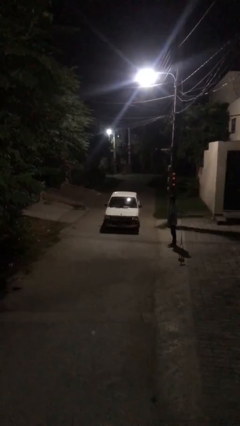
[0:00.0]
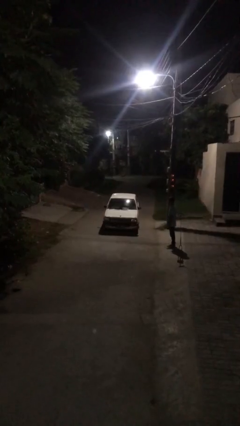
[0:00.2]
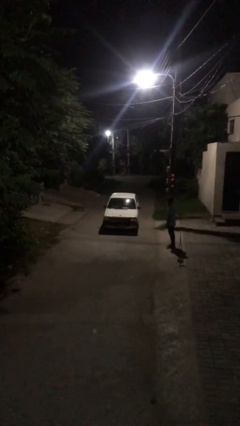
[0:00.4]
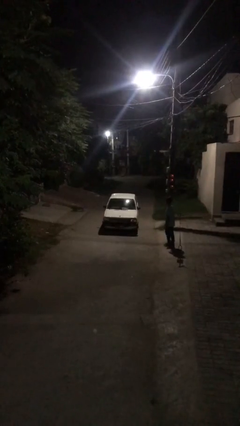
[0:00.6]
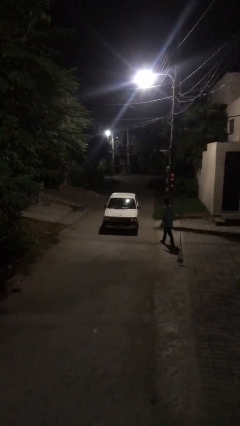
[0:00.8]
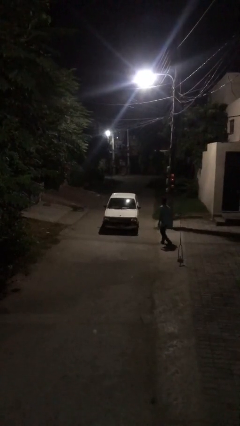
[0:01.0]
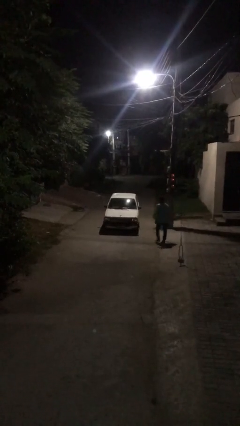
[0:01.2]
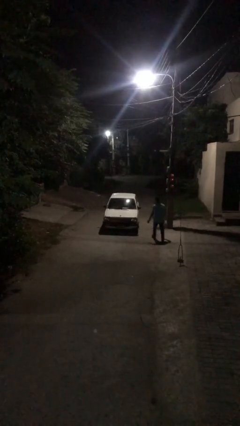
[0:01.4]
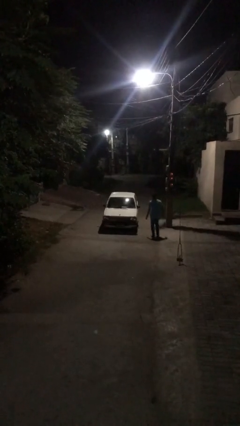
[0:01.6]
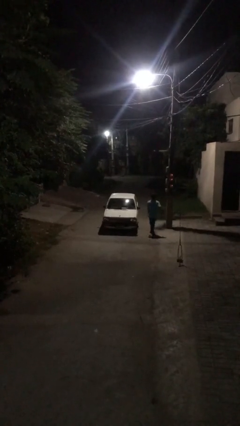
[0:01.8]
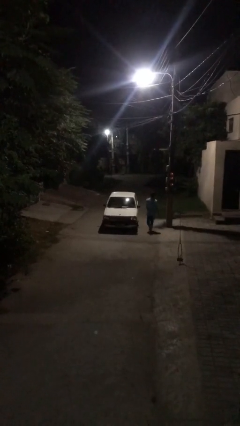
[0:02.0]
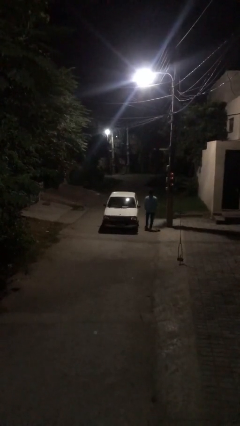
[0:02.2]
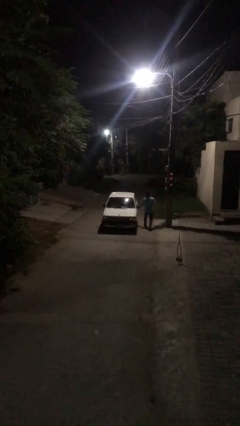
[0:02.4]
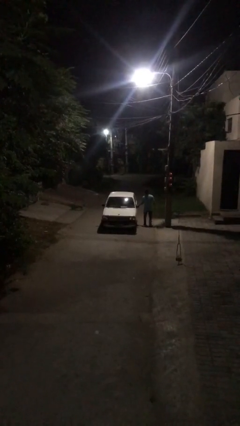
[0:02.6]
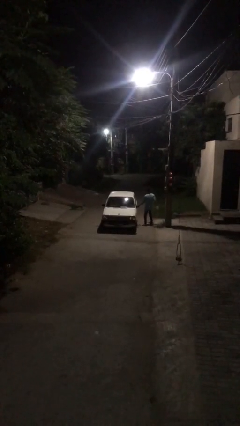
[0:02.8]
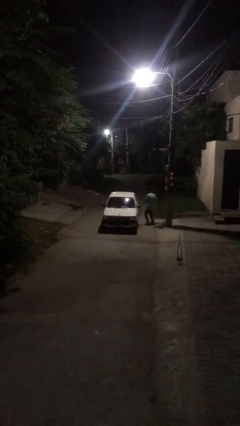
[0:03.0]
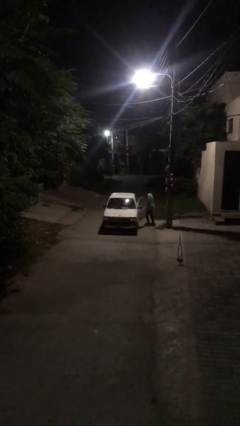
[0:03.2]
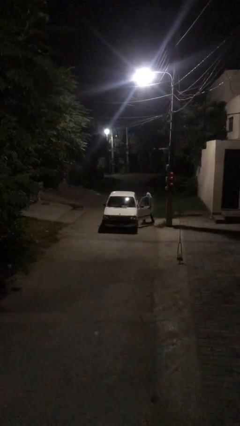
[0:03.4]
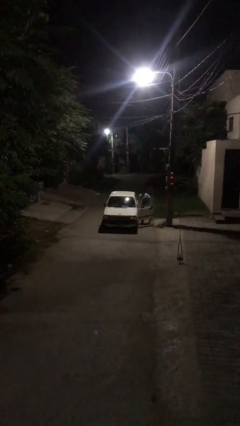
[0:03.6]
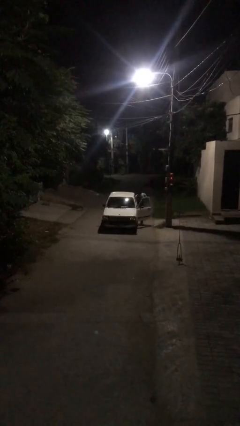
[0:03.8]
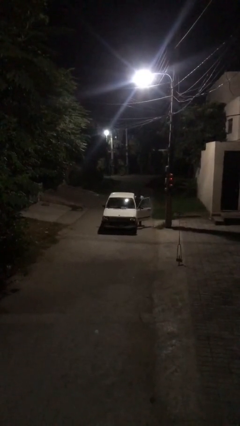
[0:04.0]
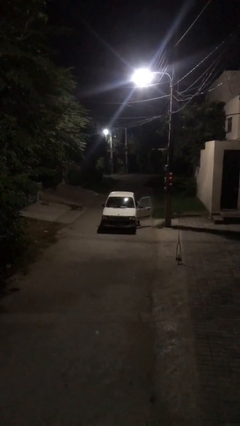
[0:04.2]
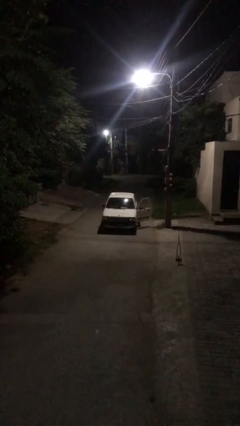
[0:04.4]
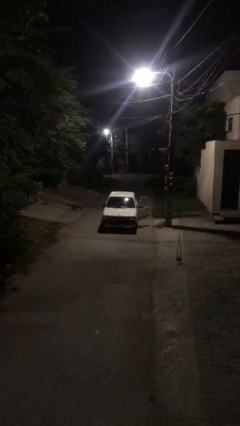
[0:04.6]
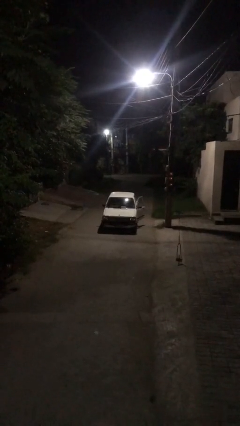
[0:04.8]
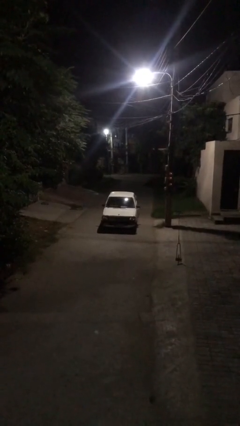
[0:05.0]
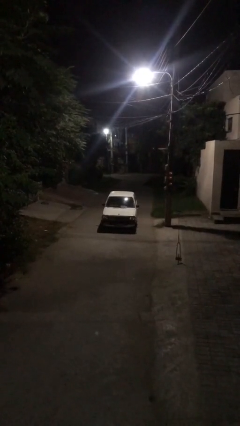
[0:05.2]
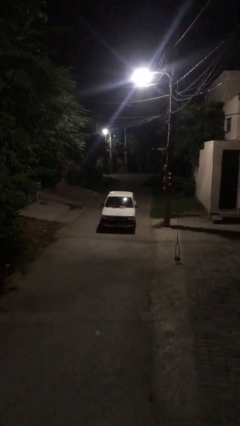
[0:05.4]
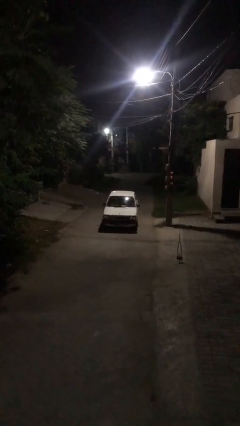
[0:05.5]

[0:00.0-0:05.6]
car picks up person

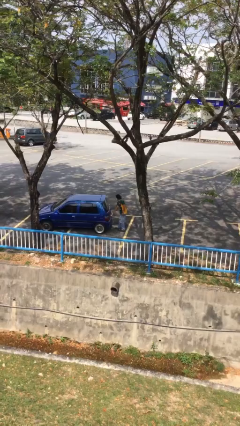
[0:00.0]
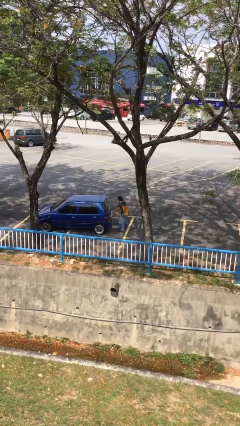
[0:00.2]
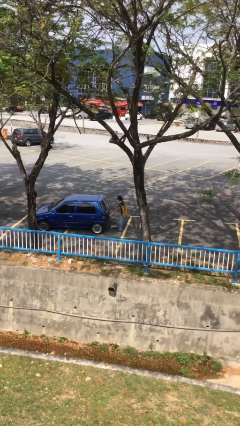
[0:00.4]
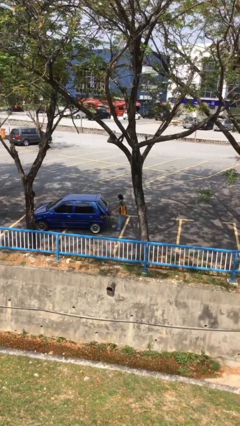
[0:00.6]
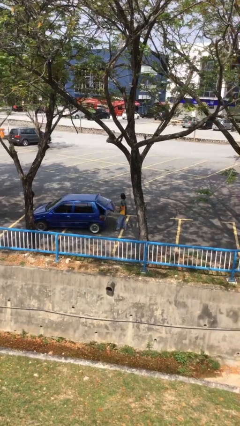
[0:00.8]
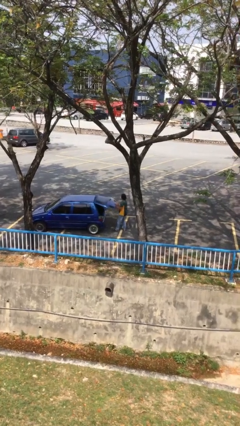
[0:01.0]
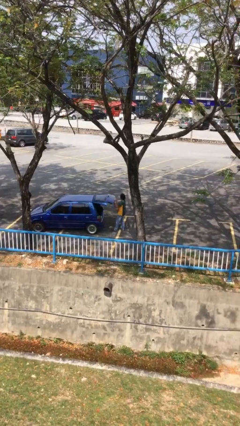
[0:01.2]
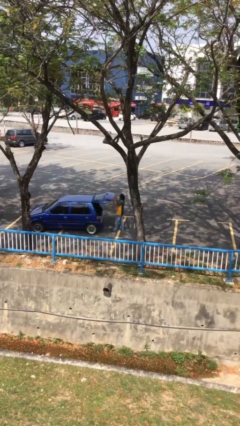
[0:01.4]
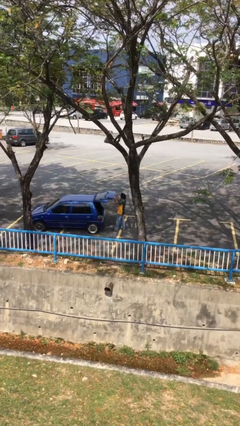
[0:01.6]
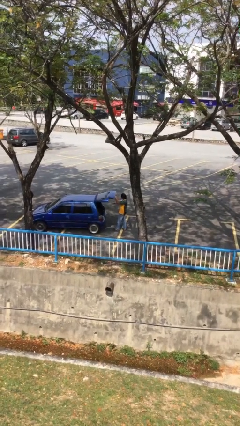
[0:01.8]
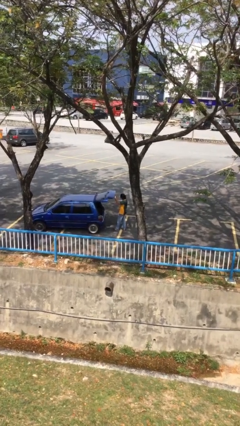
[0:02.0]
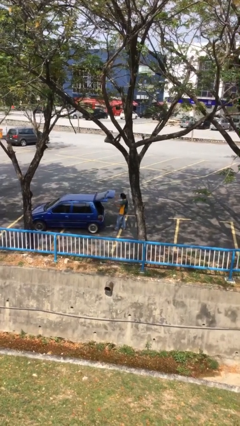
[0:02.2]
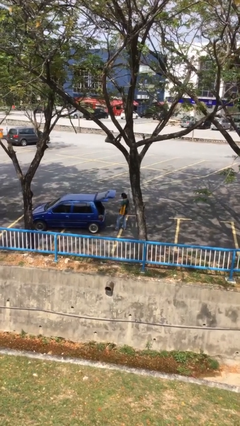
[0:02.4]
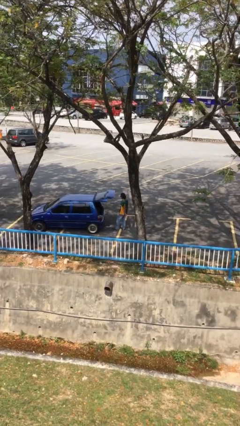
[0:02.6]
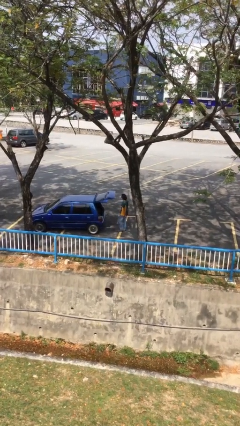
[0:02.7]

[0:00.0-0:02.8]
person opens car trunk

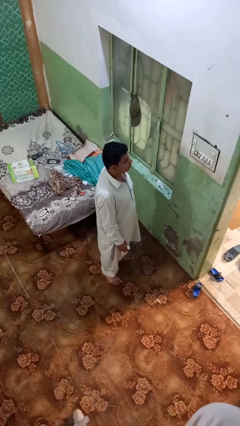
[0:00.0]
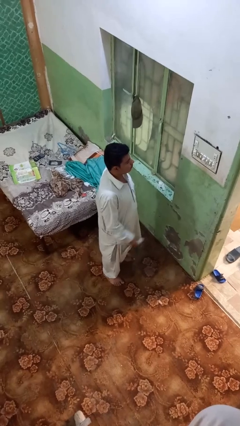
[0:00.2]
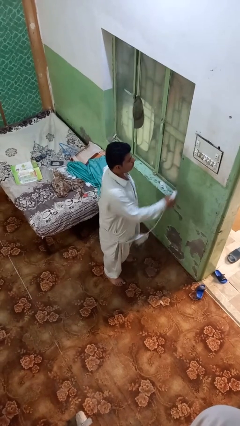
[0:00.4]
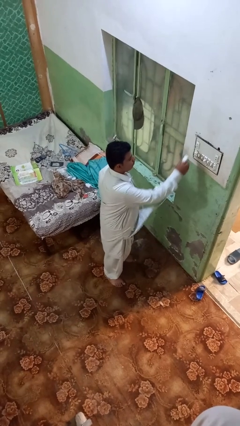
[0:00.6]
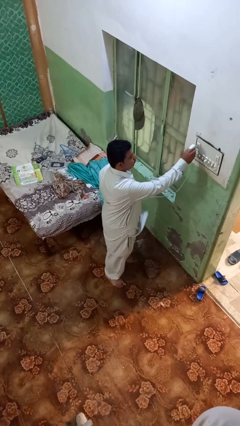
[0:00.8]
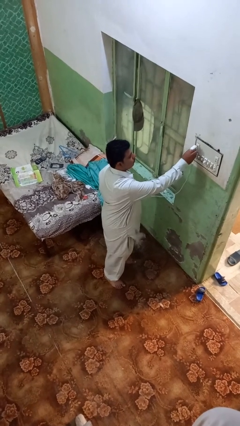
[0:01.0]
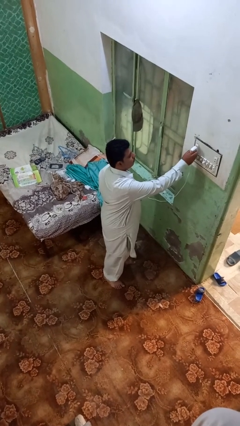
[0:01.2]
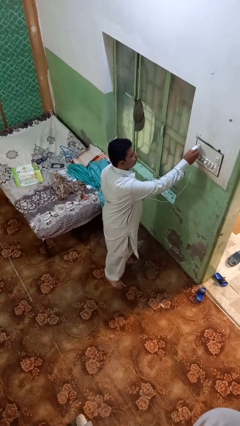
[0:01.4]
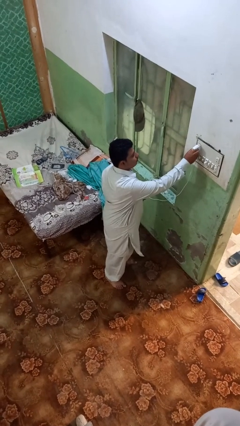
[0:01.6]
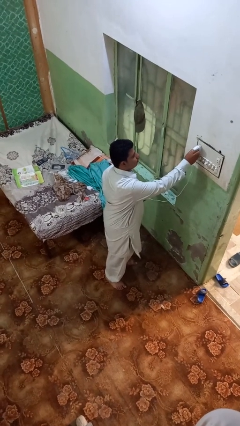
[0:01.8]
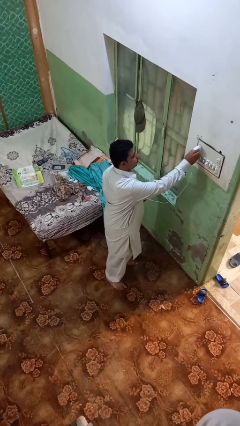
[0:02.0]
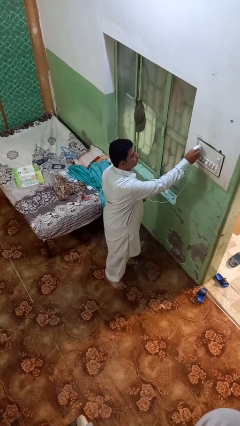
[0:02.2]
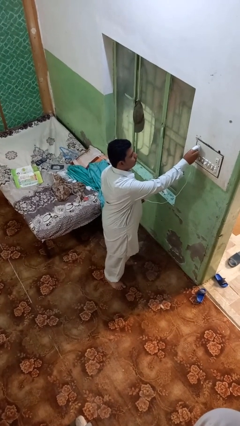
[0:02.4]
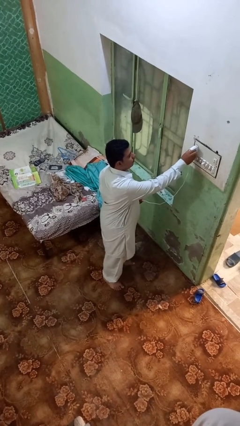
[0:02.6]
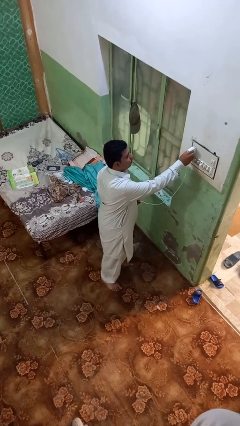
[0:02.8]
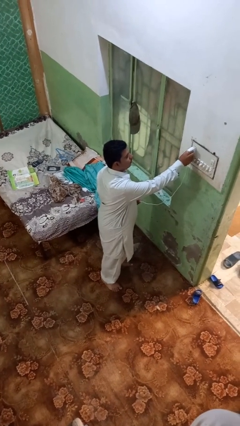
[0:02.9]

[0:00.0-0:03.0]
person plugs into electrical socket

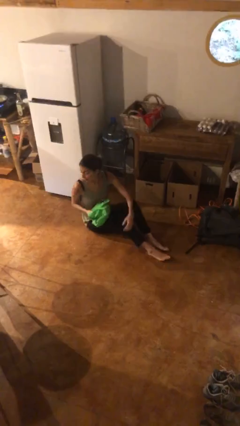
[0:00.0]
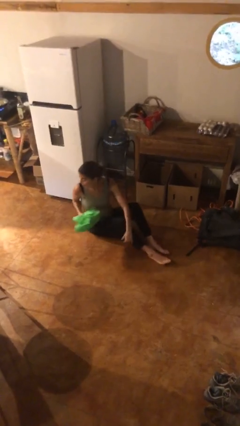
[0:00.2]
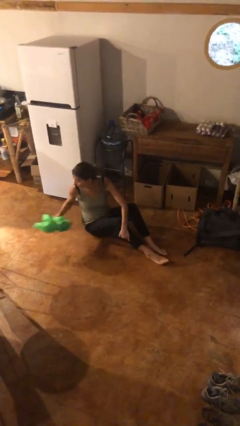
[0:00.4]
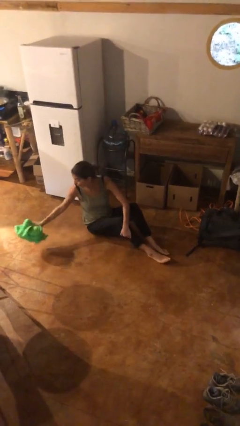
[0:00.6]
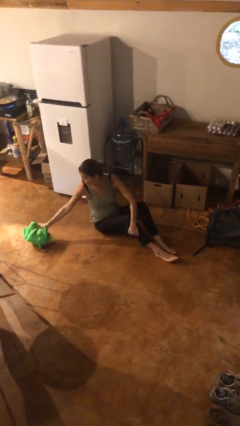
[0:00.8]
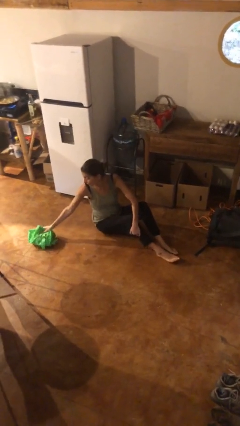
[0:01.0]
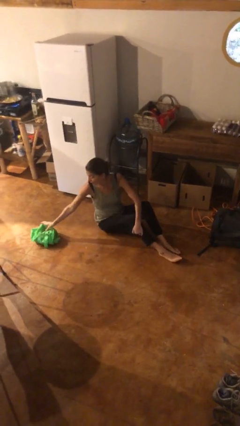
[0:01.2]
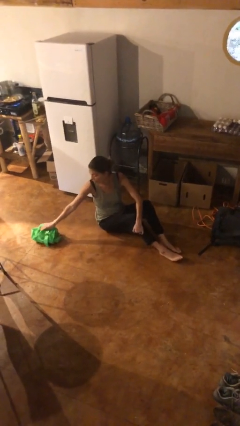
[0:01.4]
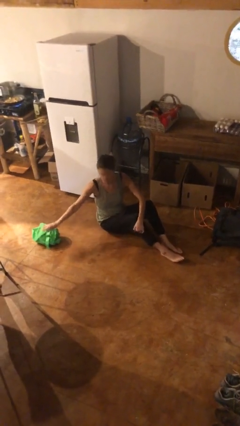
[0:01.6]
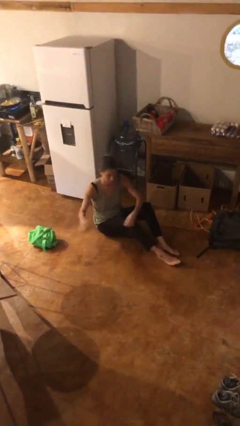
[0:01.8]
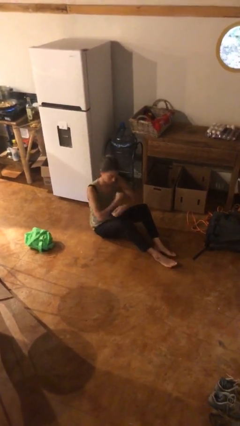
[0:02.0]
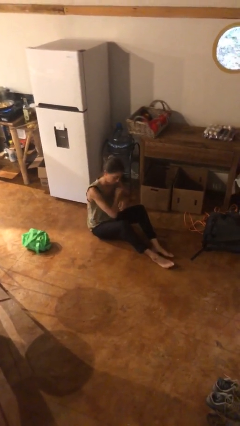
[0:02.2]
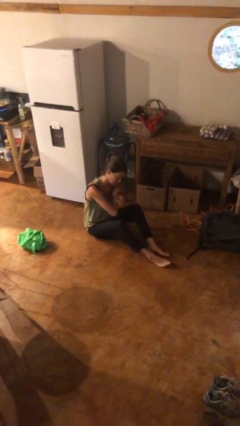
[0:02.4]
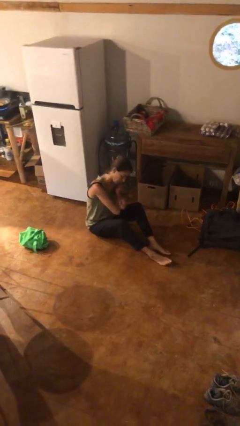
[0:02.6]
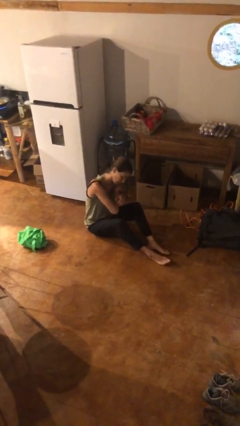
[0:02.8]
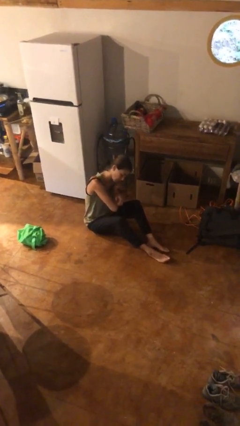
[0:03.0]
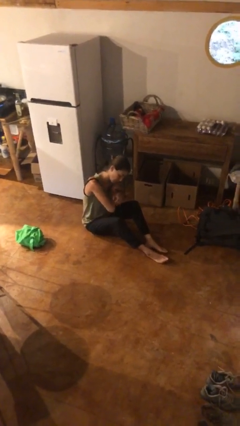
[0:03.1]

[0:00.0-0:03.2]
person puts down object on floor

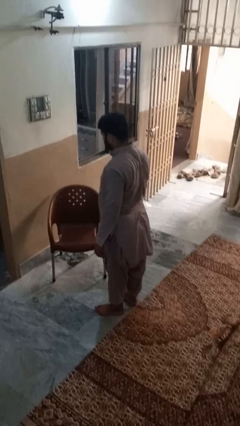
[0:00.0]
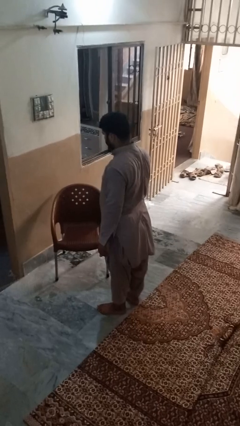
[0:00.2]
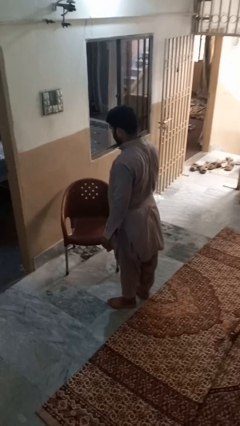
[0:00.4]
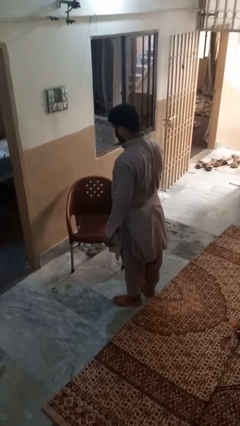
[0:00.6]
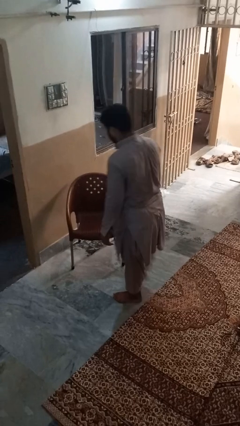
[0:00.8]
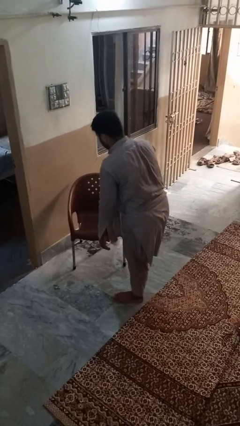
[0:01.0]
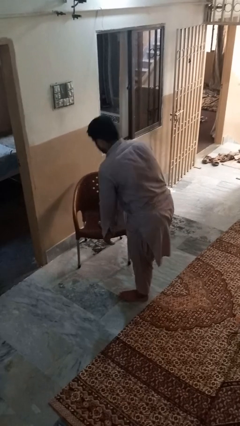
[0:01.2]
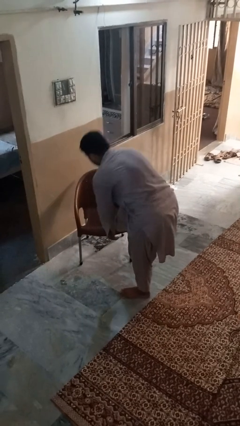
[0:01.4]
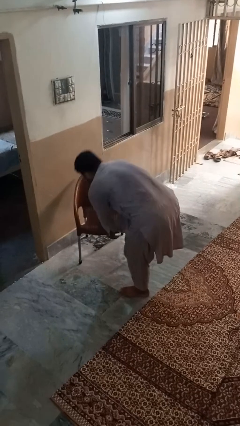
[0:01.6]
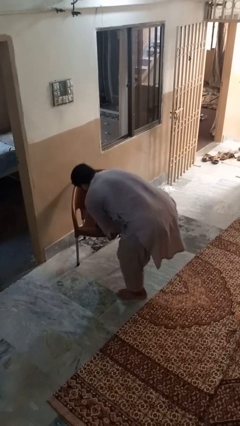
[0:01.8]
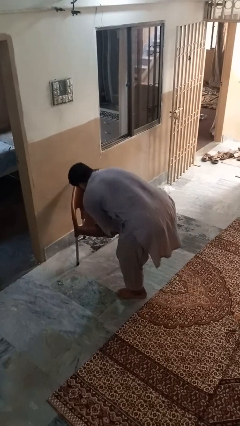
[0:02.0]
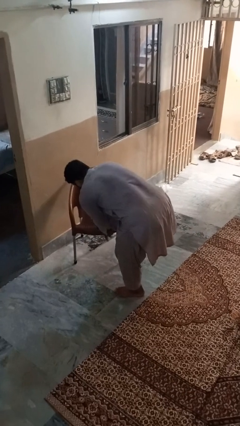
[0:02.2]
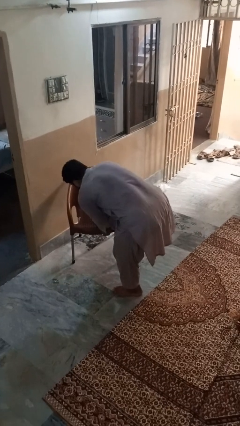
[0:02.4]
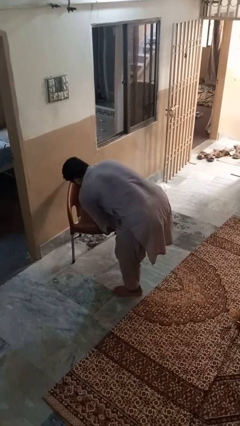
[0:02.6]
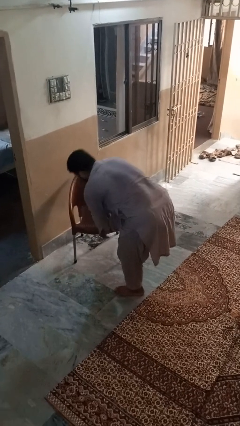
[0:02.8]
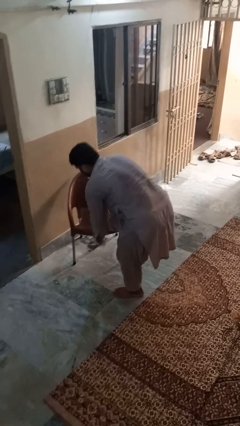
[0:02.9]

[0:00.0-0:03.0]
person stubs toe

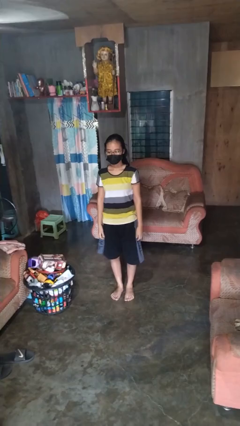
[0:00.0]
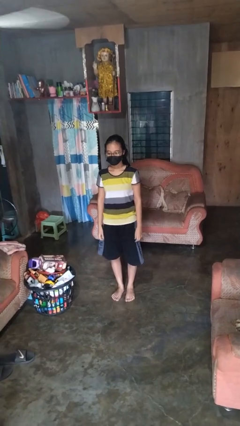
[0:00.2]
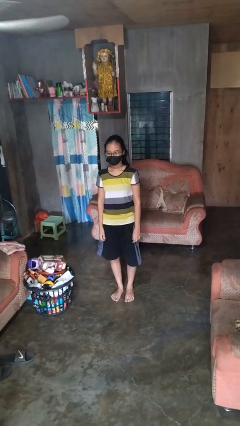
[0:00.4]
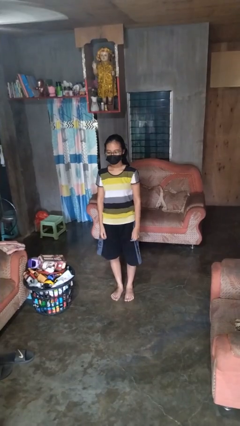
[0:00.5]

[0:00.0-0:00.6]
person takes off glasses
